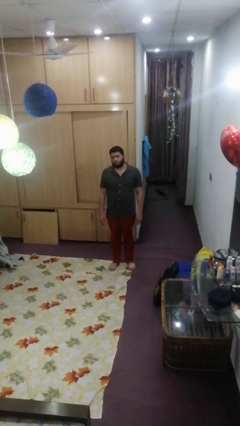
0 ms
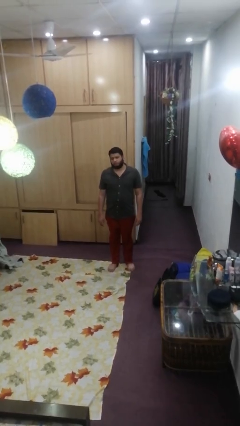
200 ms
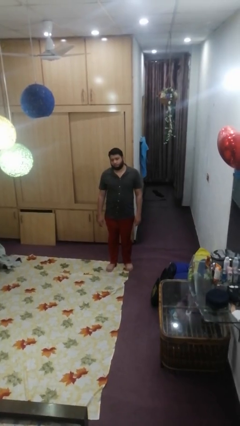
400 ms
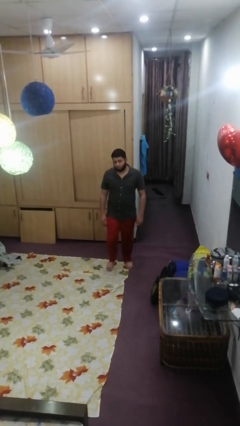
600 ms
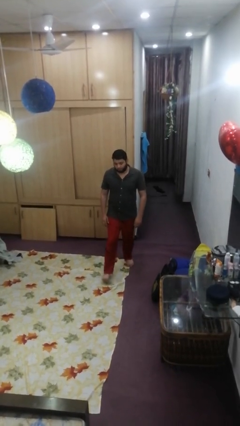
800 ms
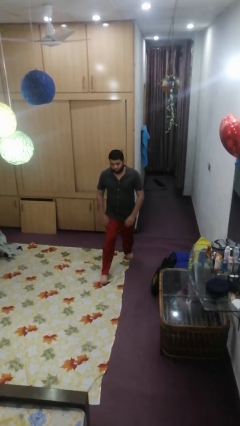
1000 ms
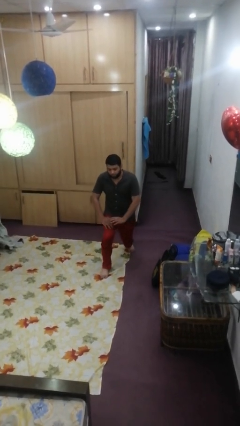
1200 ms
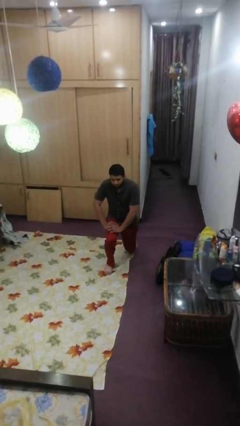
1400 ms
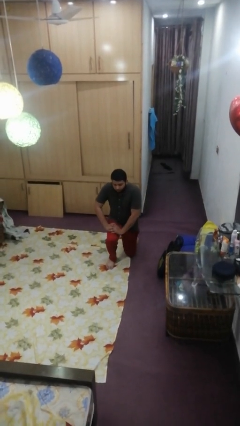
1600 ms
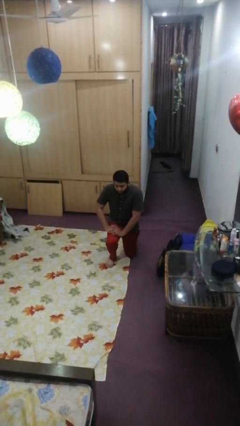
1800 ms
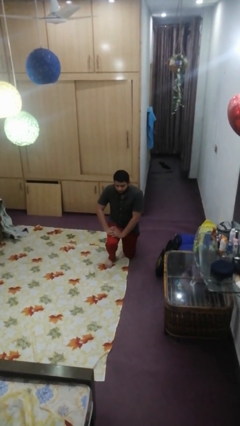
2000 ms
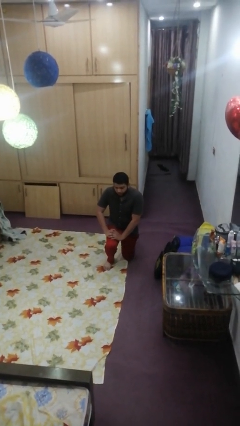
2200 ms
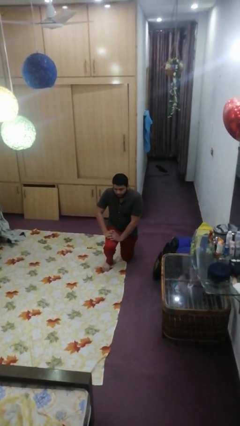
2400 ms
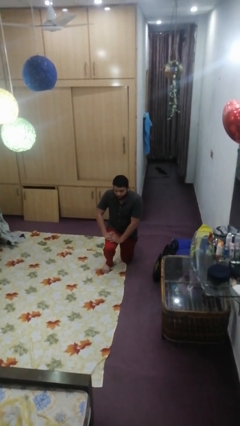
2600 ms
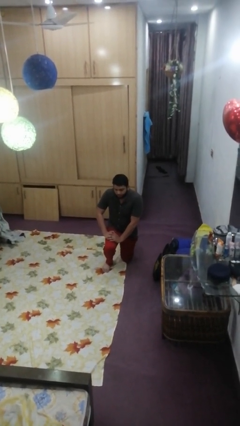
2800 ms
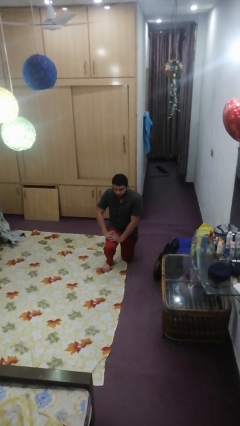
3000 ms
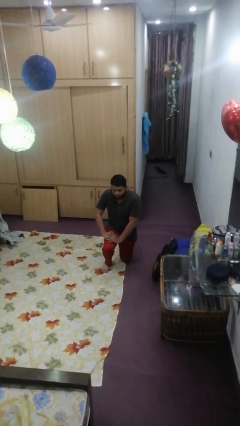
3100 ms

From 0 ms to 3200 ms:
person kneels

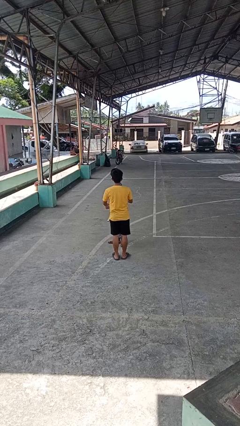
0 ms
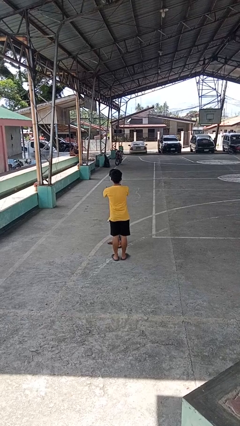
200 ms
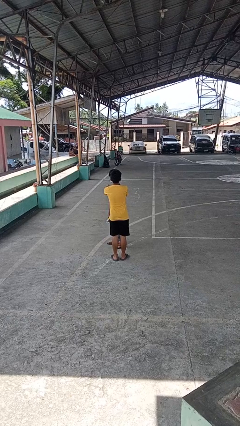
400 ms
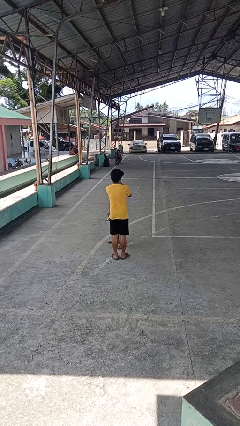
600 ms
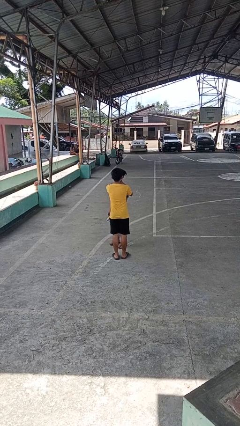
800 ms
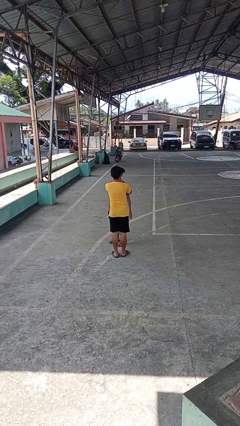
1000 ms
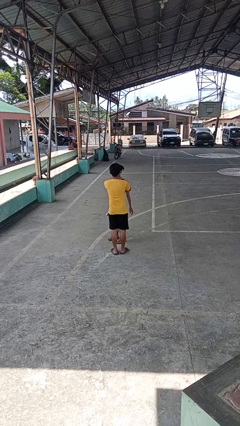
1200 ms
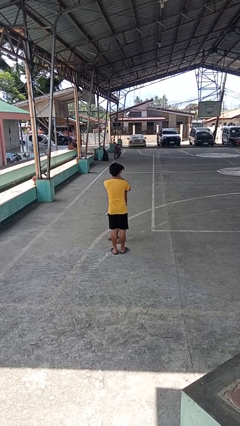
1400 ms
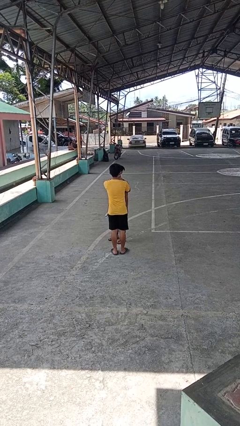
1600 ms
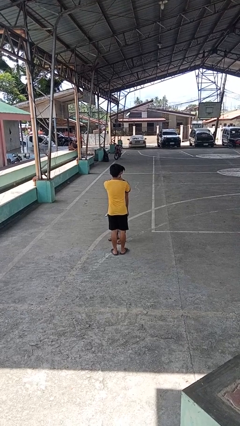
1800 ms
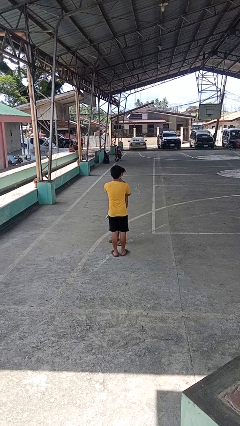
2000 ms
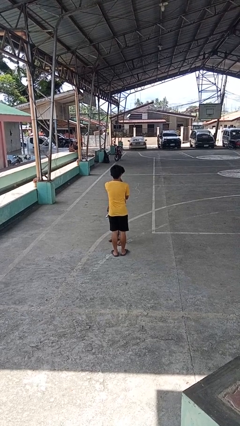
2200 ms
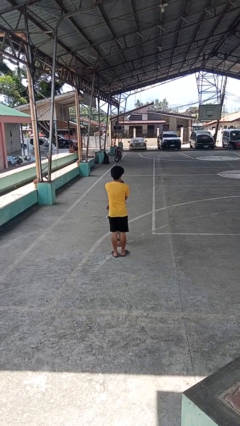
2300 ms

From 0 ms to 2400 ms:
person grabs person by shoulder

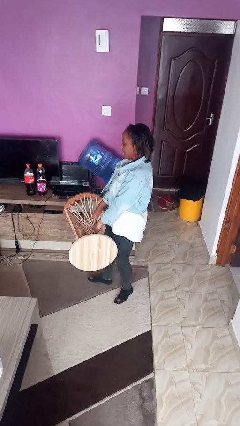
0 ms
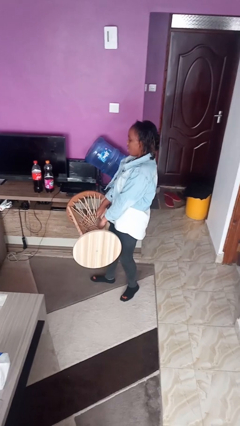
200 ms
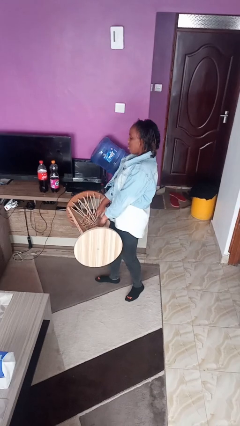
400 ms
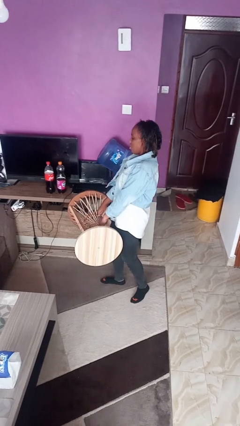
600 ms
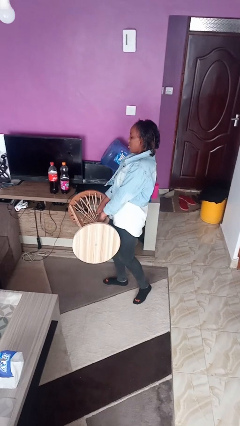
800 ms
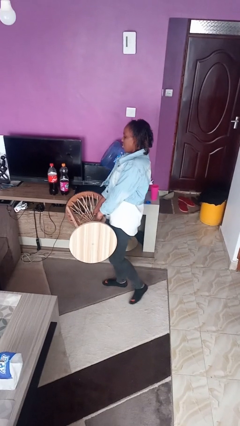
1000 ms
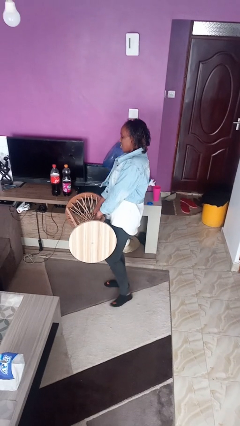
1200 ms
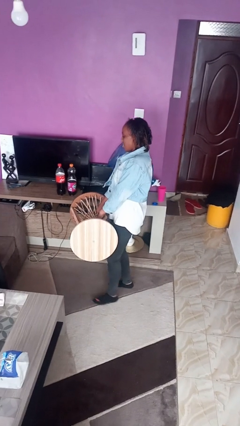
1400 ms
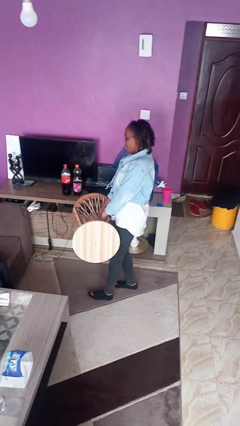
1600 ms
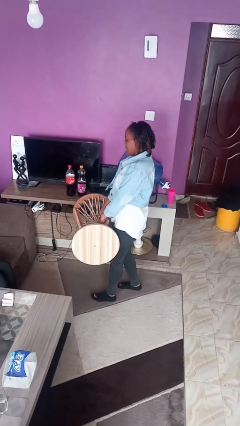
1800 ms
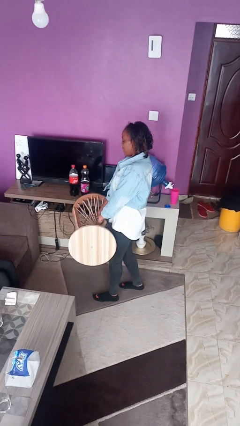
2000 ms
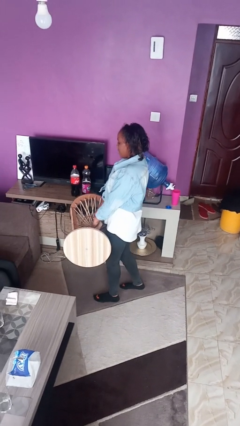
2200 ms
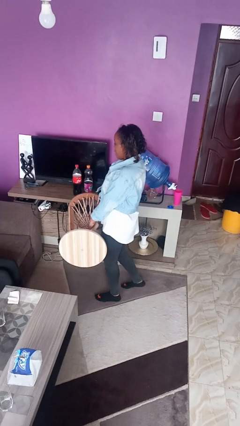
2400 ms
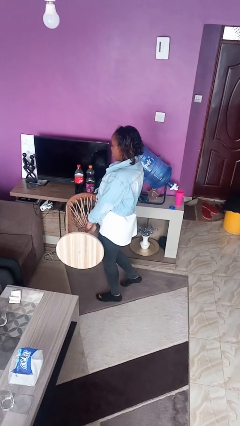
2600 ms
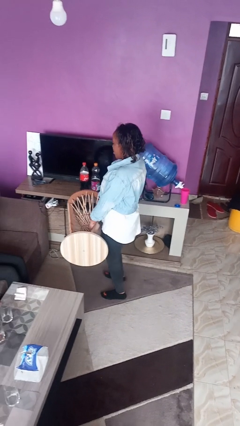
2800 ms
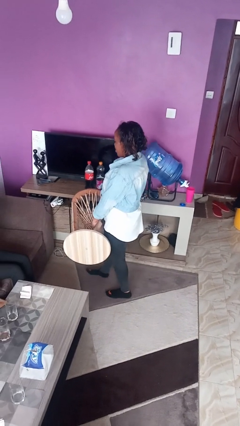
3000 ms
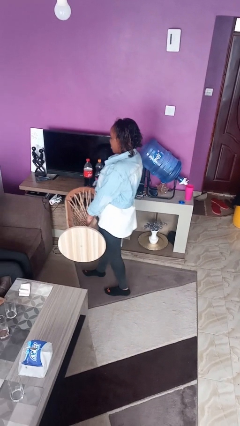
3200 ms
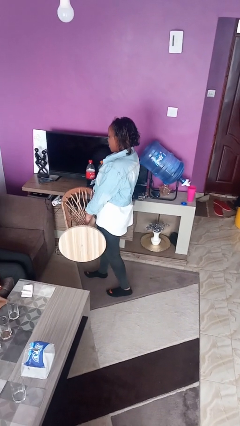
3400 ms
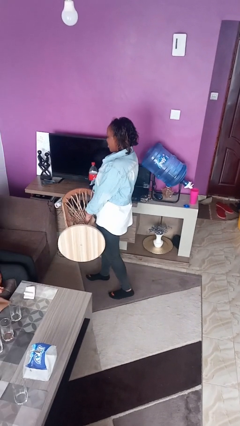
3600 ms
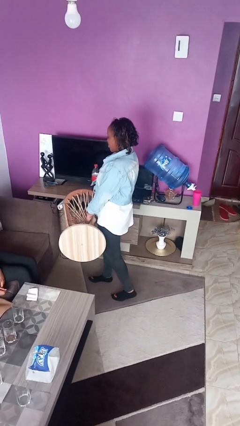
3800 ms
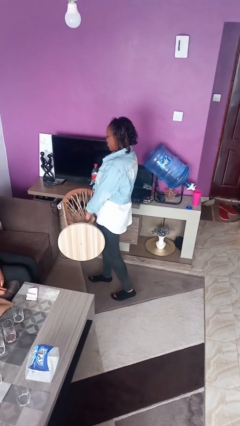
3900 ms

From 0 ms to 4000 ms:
person carries furniture

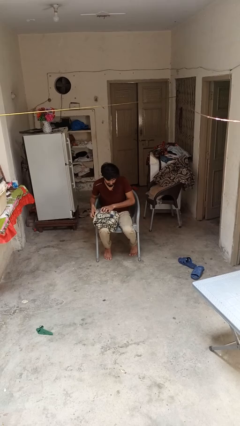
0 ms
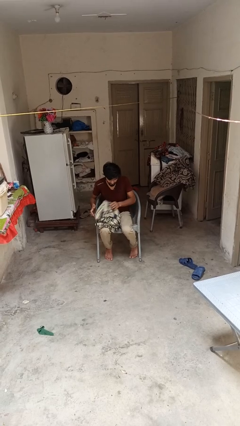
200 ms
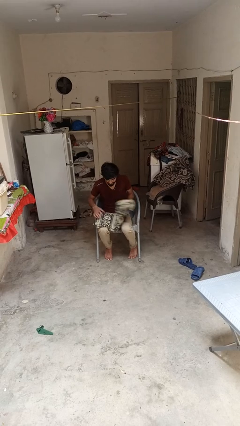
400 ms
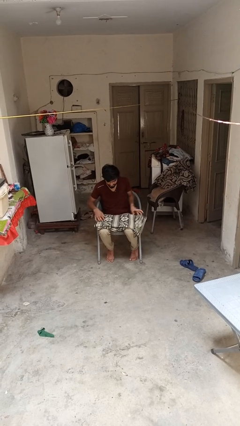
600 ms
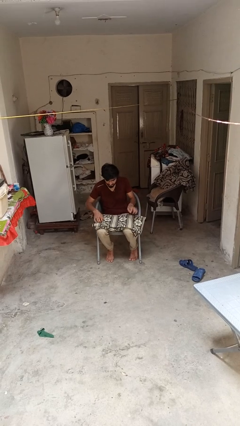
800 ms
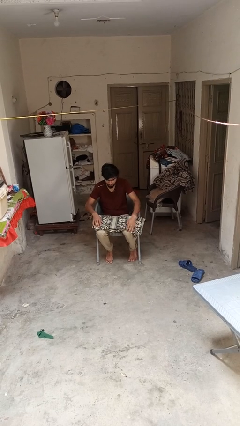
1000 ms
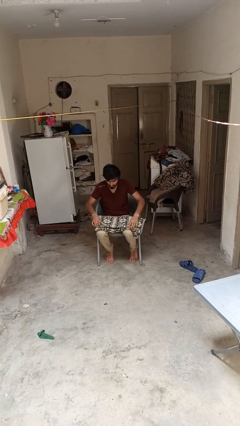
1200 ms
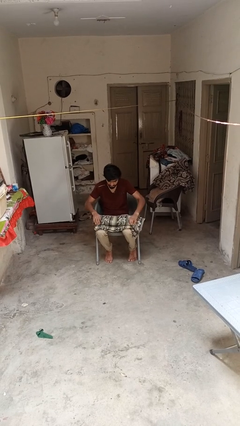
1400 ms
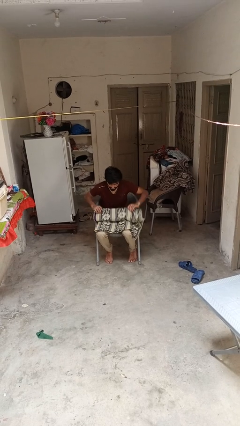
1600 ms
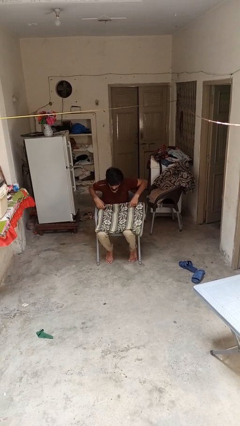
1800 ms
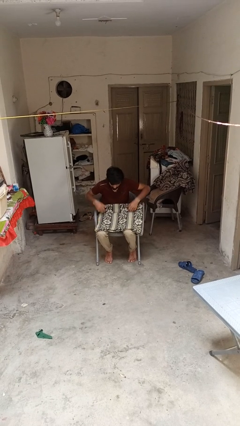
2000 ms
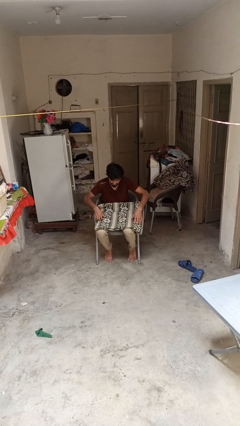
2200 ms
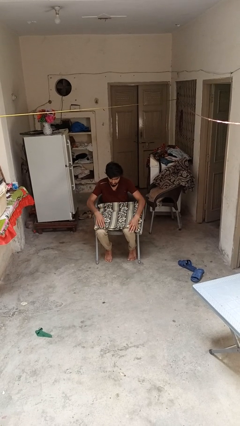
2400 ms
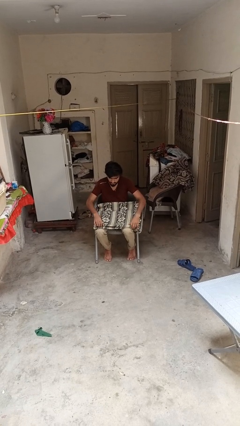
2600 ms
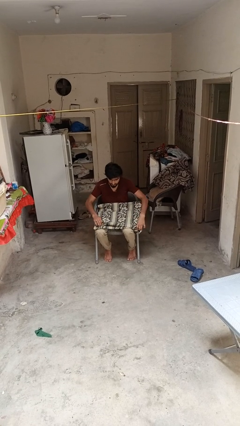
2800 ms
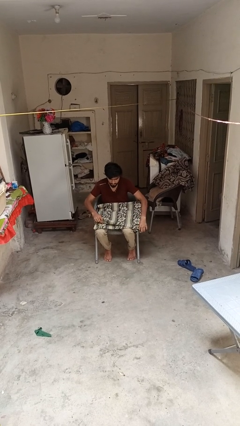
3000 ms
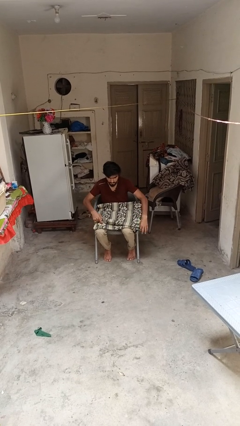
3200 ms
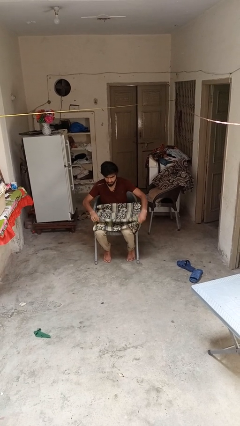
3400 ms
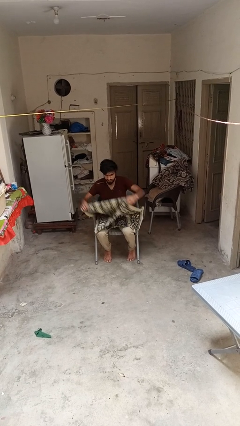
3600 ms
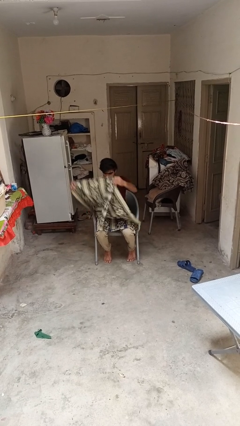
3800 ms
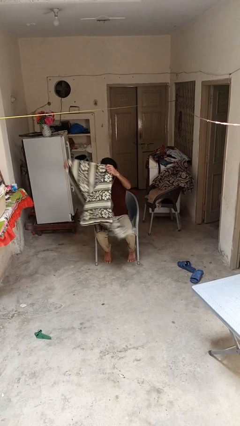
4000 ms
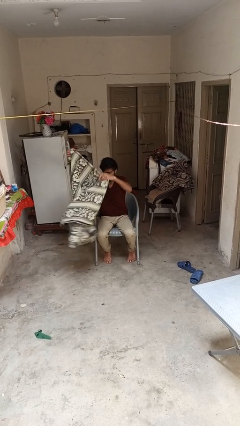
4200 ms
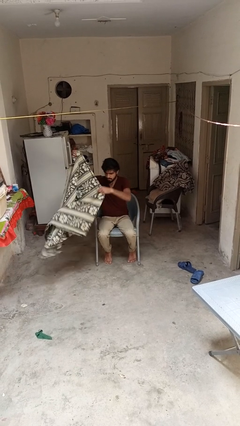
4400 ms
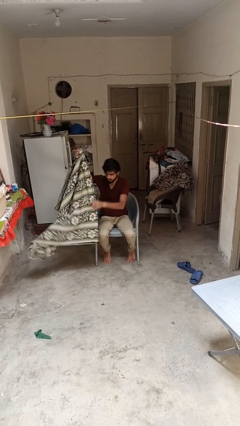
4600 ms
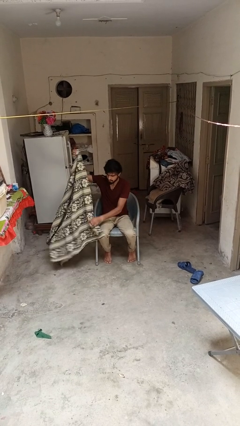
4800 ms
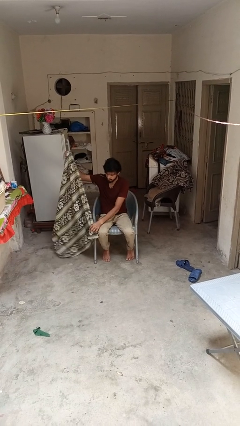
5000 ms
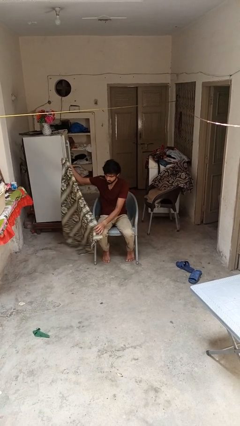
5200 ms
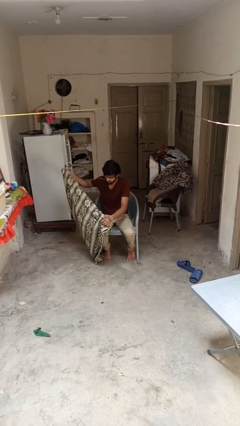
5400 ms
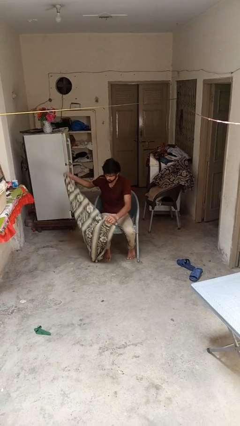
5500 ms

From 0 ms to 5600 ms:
person unfolds blanket

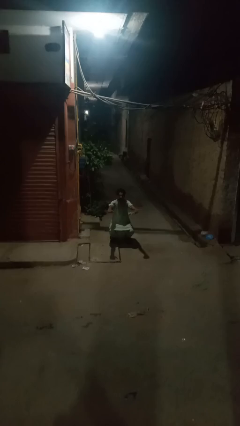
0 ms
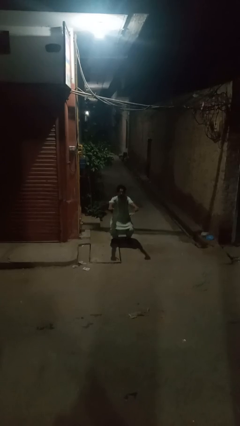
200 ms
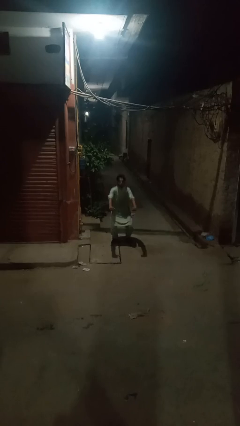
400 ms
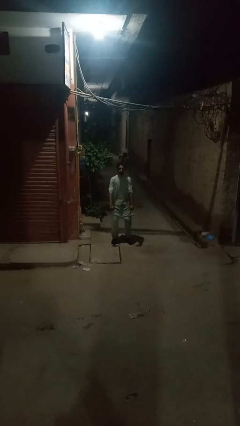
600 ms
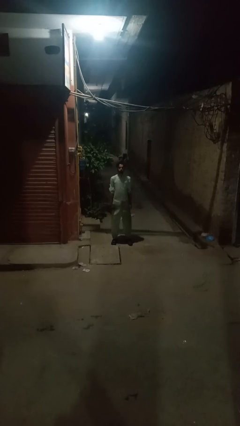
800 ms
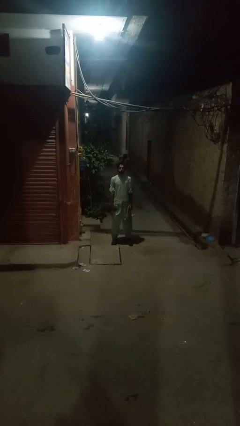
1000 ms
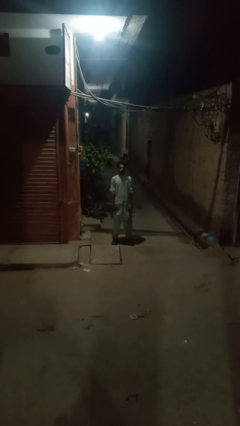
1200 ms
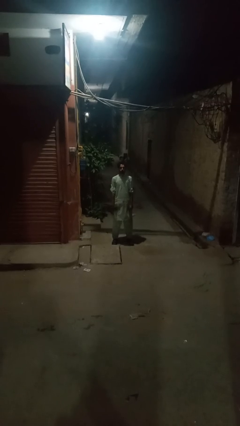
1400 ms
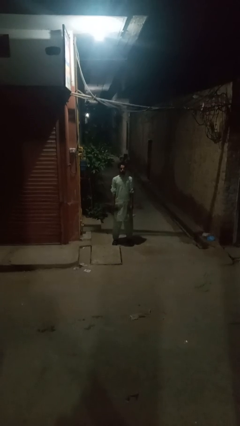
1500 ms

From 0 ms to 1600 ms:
person stands up

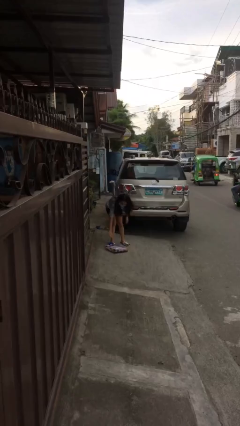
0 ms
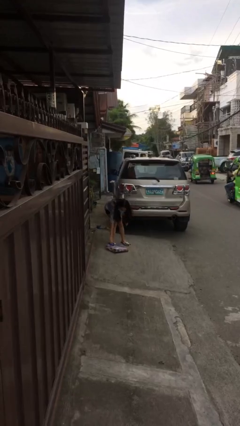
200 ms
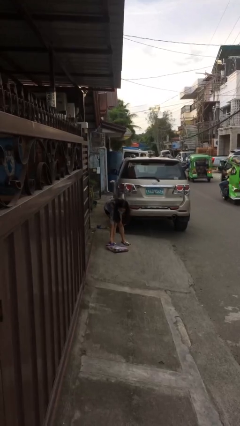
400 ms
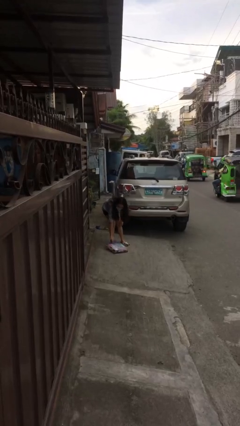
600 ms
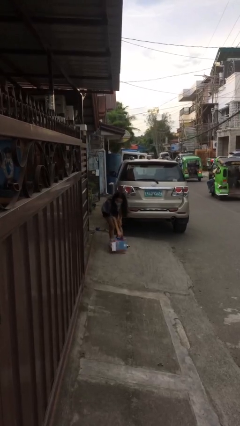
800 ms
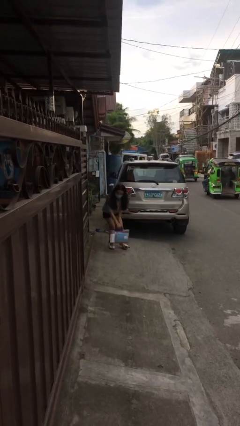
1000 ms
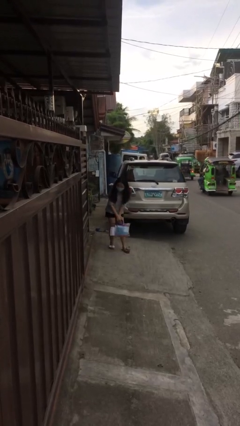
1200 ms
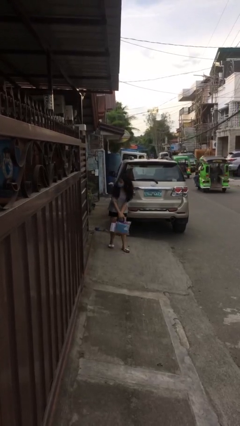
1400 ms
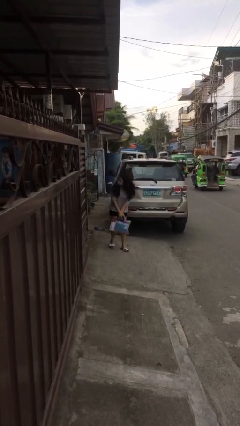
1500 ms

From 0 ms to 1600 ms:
person picks up object from floor
